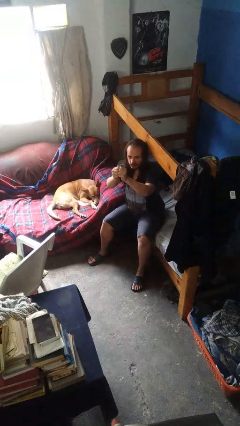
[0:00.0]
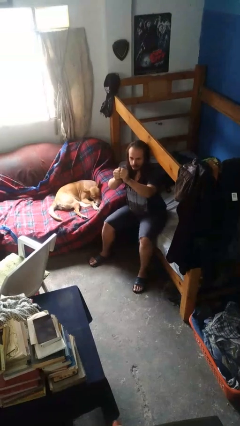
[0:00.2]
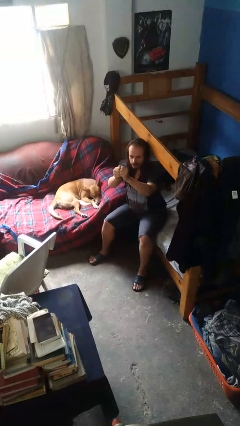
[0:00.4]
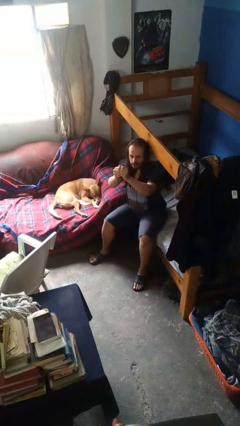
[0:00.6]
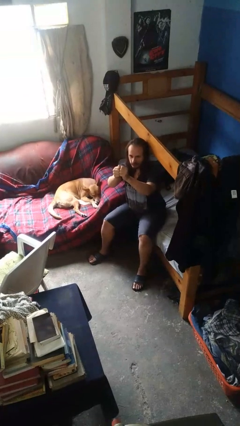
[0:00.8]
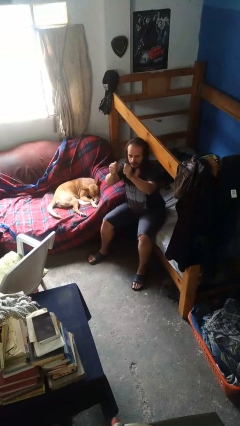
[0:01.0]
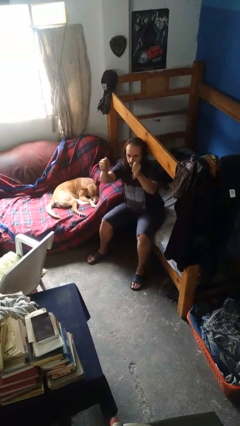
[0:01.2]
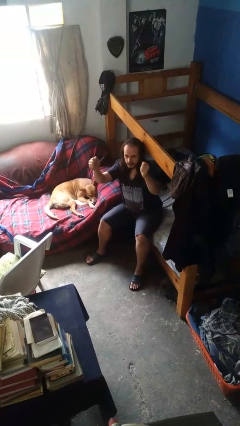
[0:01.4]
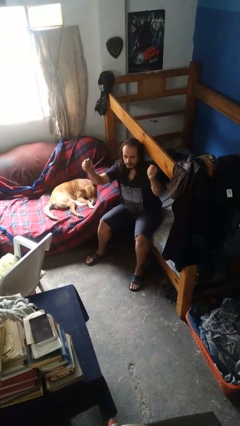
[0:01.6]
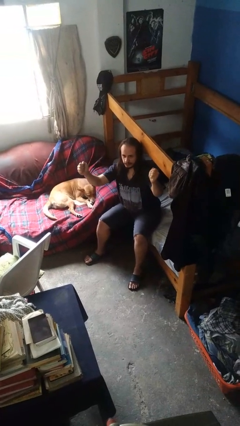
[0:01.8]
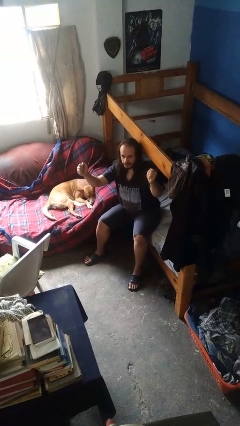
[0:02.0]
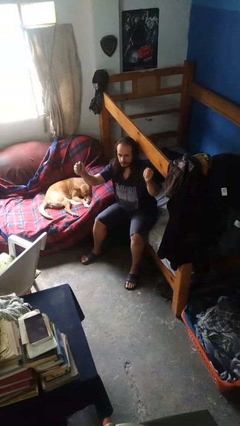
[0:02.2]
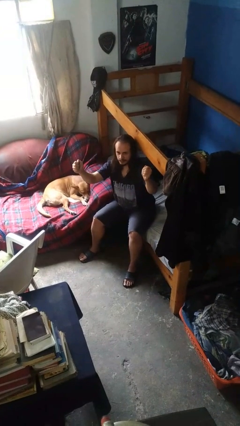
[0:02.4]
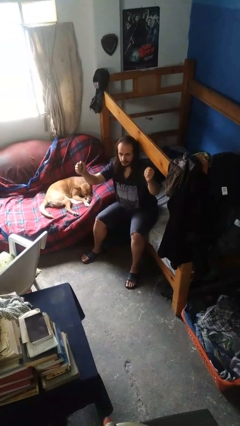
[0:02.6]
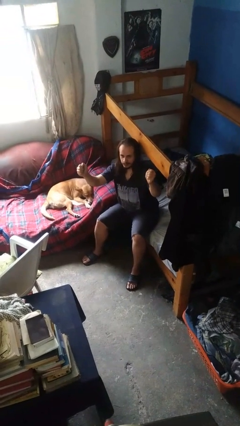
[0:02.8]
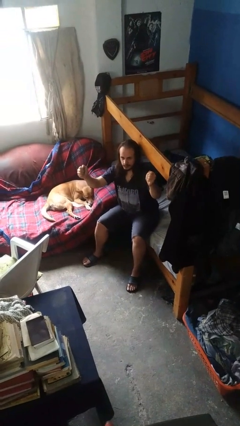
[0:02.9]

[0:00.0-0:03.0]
person gestures zoom in

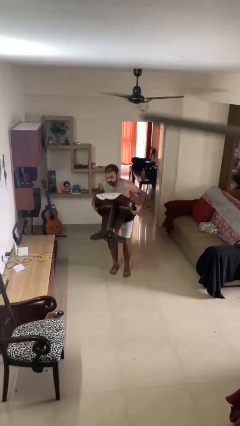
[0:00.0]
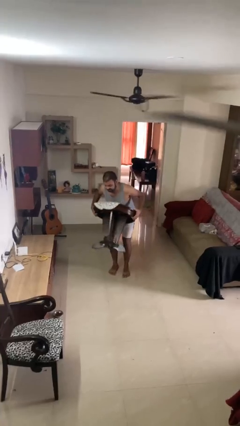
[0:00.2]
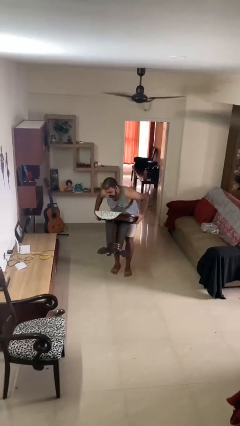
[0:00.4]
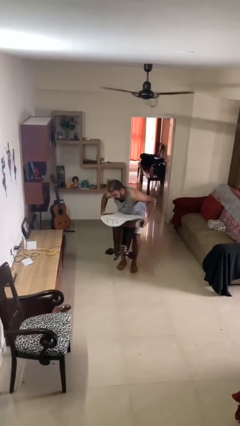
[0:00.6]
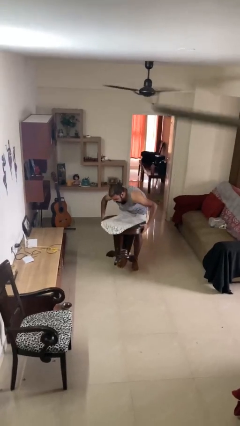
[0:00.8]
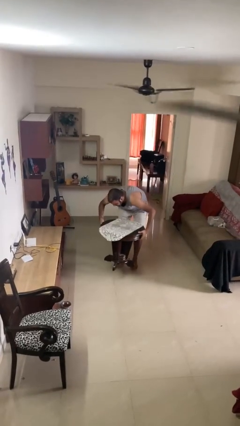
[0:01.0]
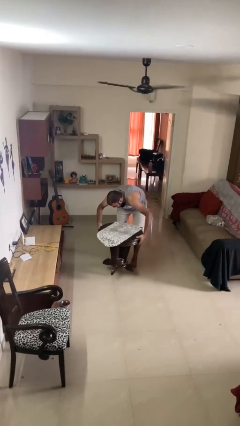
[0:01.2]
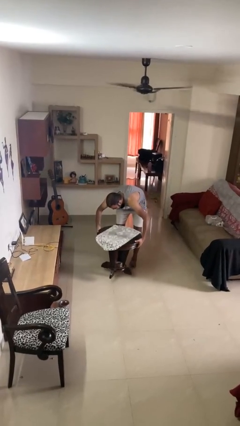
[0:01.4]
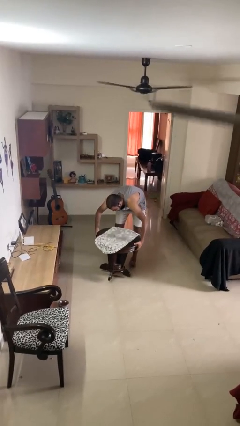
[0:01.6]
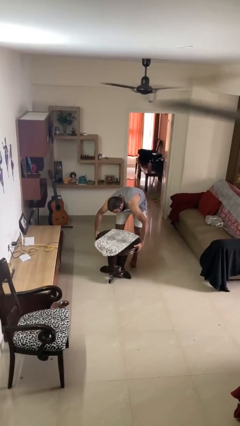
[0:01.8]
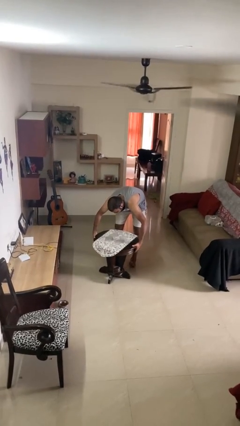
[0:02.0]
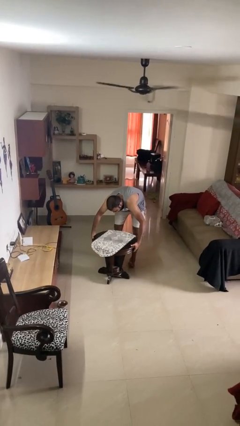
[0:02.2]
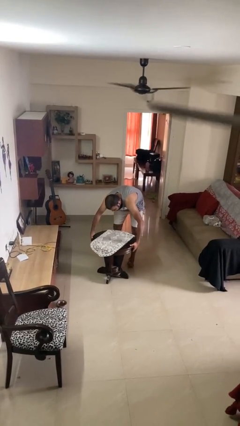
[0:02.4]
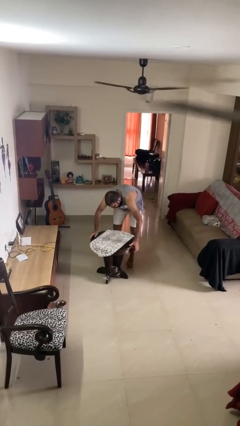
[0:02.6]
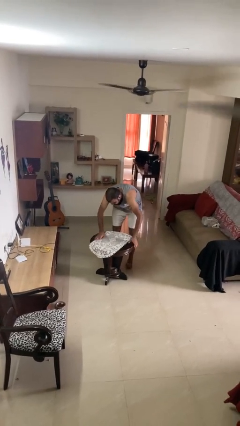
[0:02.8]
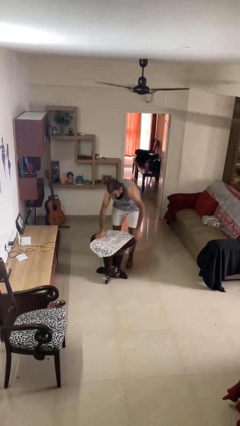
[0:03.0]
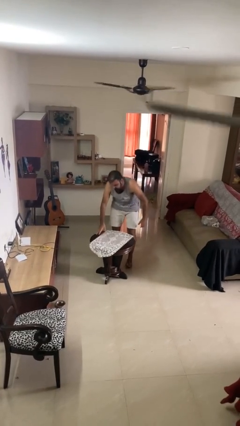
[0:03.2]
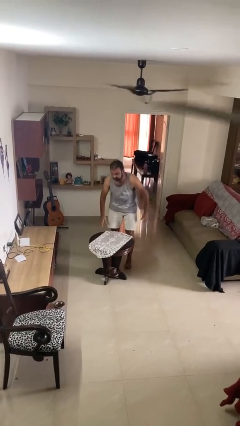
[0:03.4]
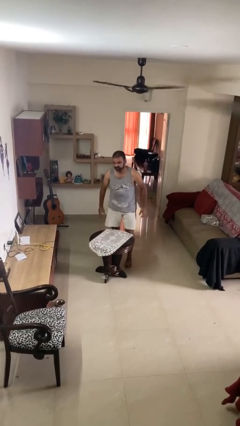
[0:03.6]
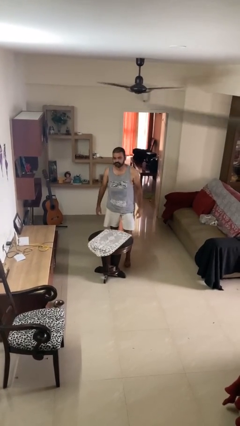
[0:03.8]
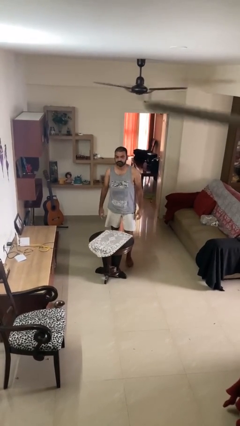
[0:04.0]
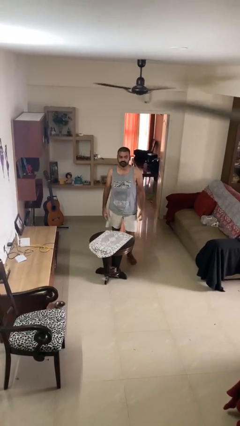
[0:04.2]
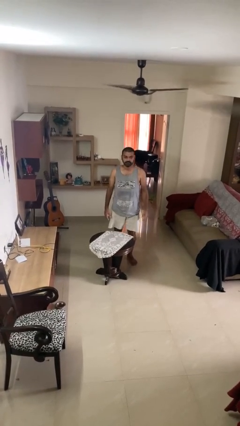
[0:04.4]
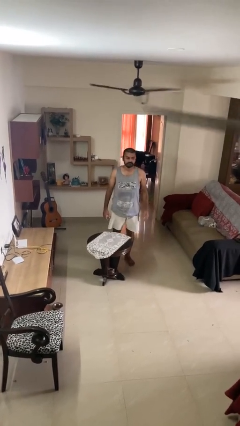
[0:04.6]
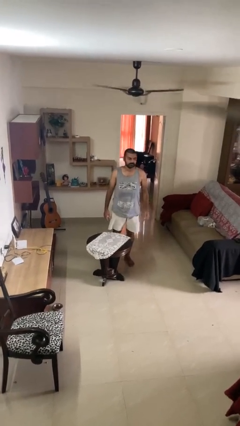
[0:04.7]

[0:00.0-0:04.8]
person puts down object on floor

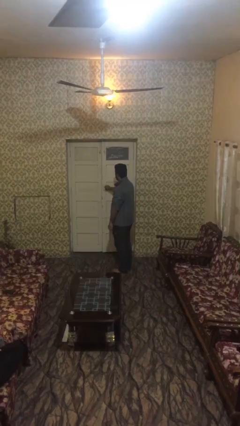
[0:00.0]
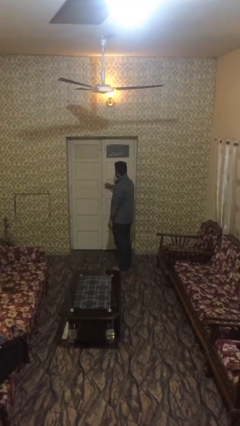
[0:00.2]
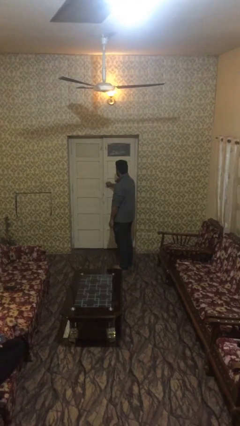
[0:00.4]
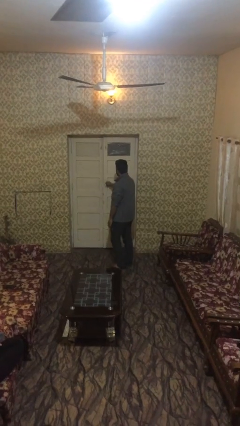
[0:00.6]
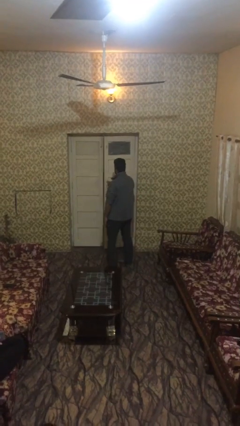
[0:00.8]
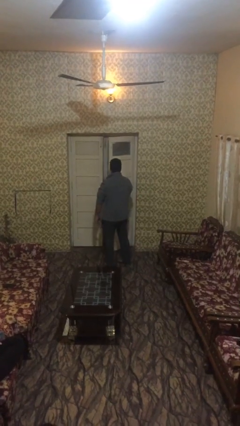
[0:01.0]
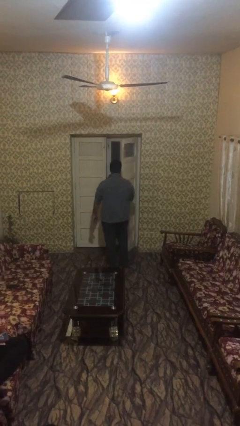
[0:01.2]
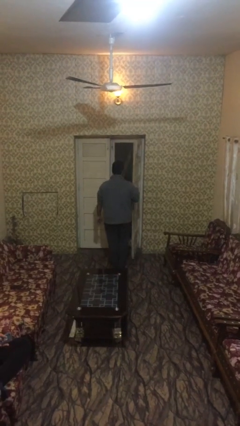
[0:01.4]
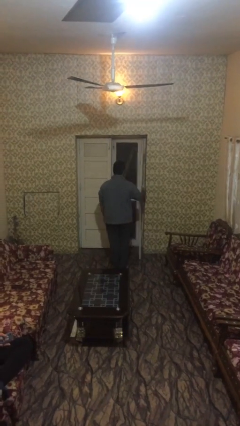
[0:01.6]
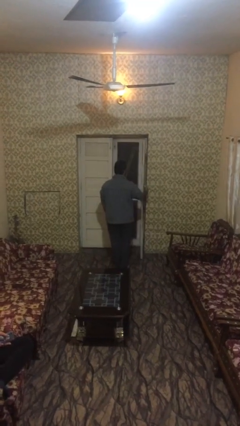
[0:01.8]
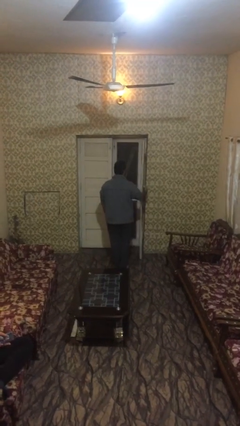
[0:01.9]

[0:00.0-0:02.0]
person opens facility door

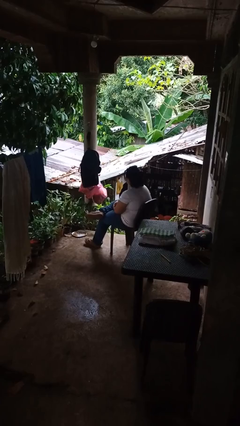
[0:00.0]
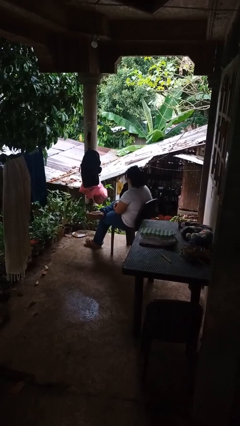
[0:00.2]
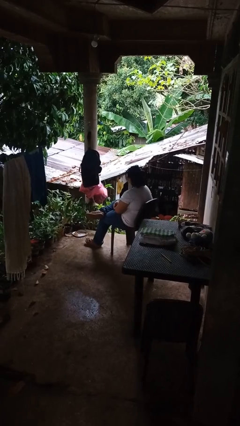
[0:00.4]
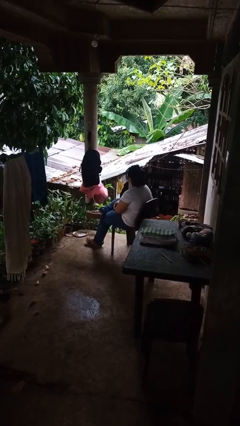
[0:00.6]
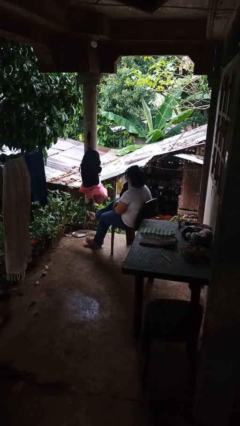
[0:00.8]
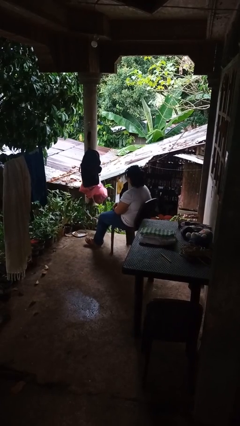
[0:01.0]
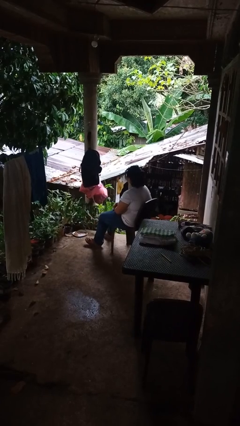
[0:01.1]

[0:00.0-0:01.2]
person crosses legs

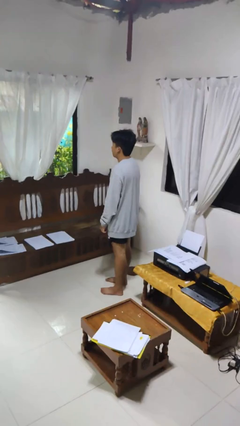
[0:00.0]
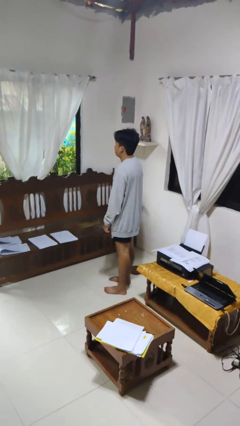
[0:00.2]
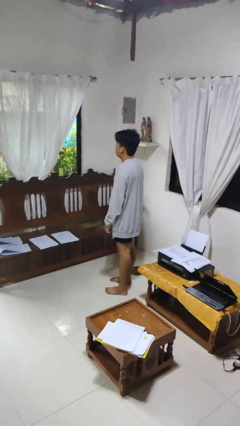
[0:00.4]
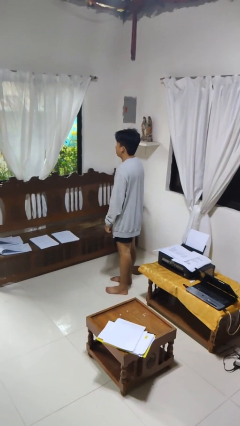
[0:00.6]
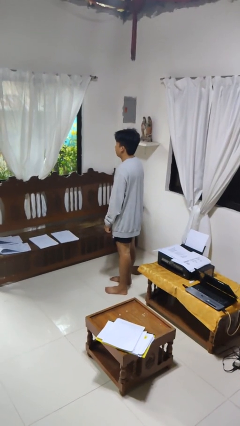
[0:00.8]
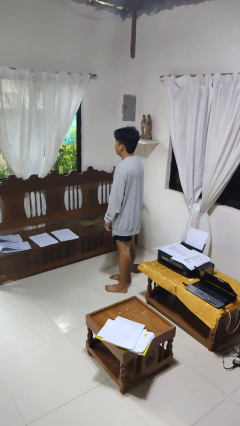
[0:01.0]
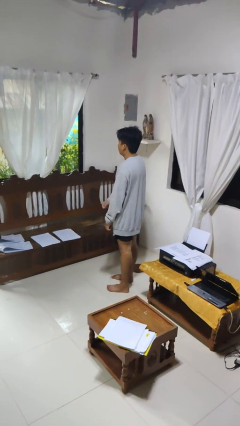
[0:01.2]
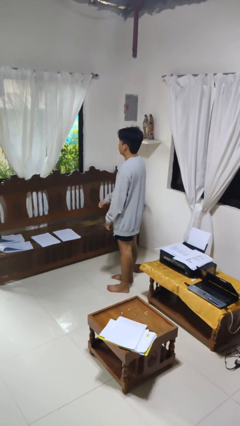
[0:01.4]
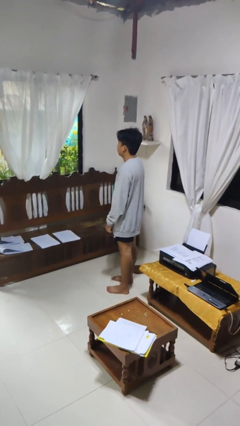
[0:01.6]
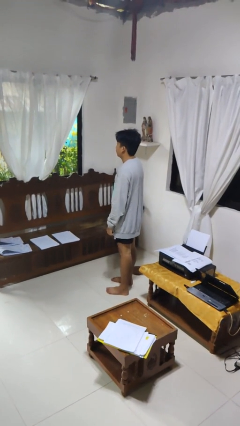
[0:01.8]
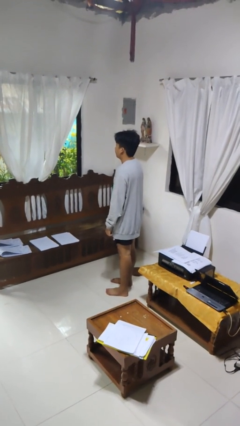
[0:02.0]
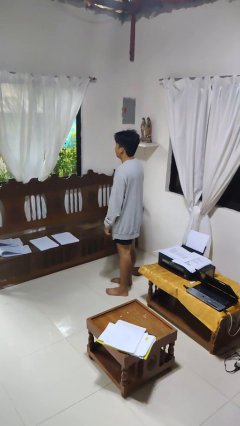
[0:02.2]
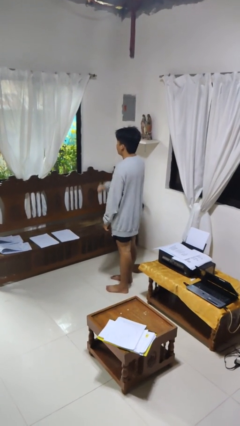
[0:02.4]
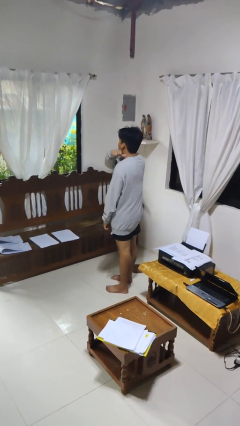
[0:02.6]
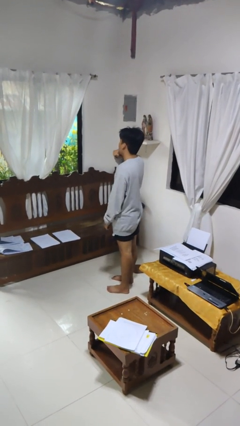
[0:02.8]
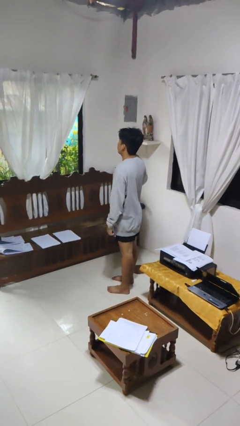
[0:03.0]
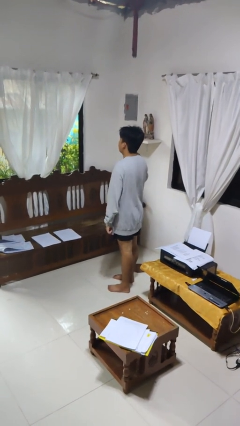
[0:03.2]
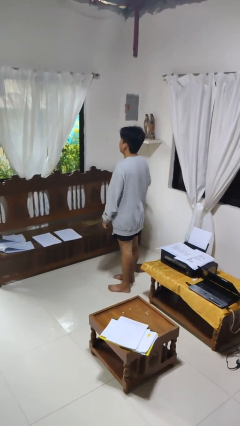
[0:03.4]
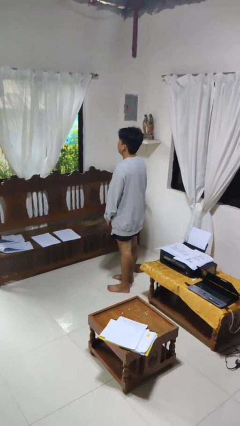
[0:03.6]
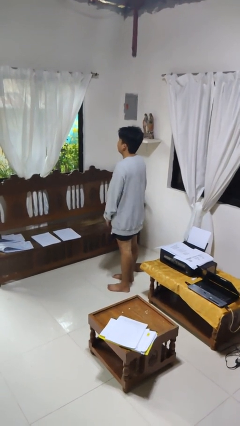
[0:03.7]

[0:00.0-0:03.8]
person gestures cut

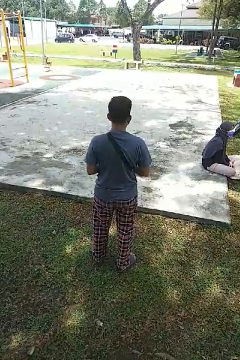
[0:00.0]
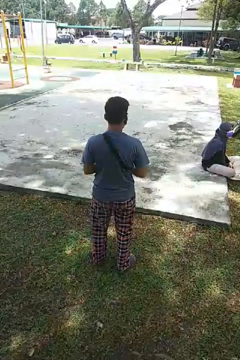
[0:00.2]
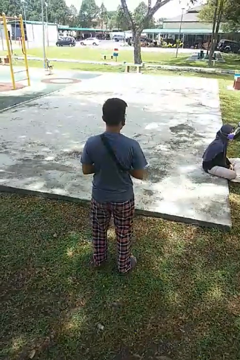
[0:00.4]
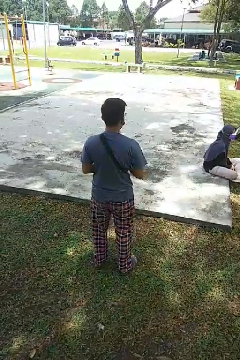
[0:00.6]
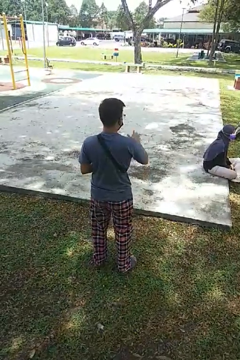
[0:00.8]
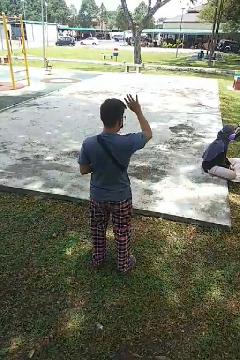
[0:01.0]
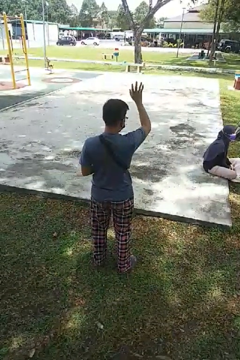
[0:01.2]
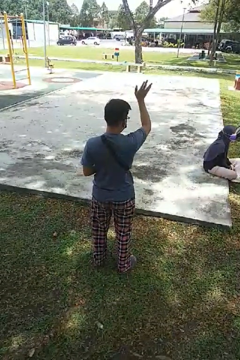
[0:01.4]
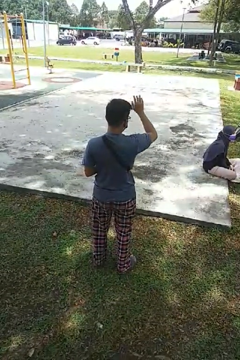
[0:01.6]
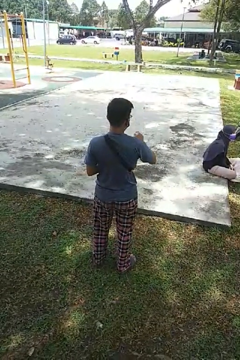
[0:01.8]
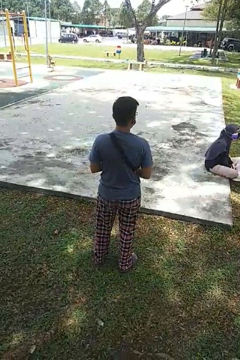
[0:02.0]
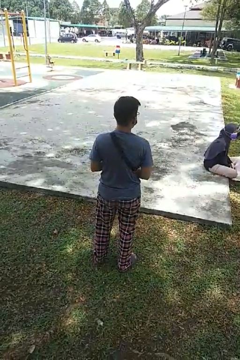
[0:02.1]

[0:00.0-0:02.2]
person waves at person

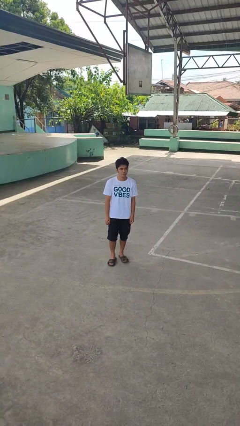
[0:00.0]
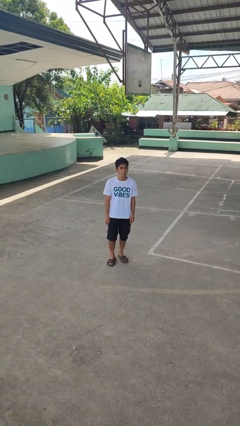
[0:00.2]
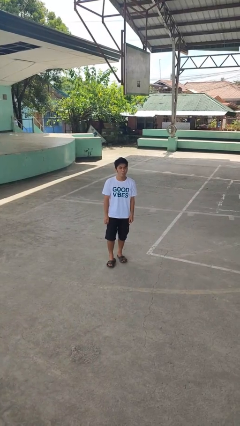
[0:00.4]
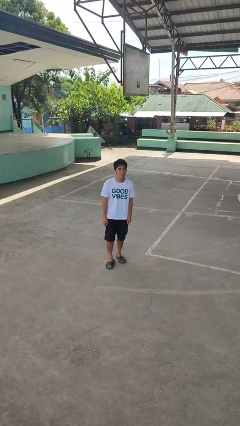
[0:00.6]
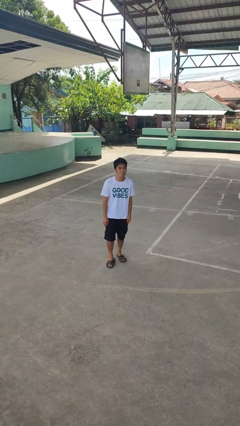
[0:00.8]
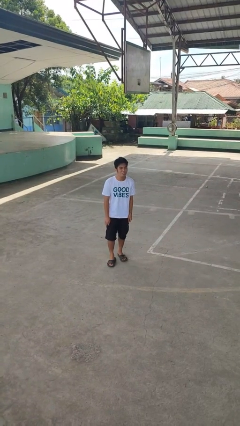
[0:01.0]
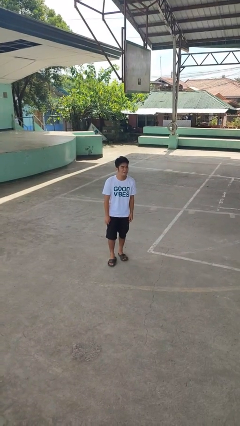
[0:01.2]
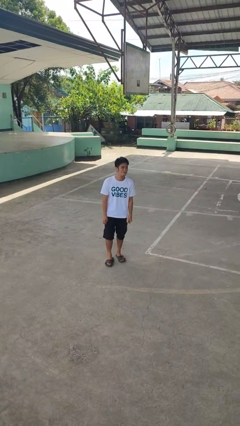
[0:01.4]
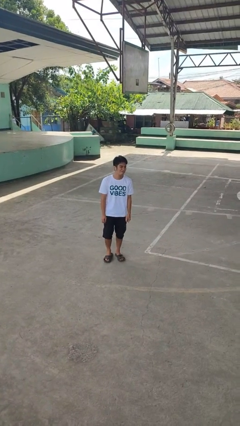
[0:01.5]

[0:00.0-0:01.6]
person sticks out tongue
